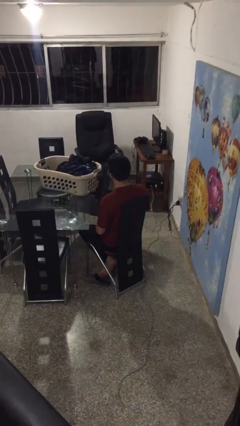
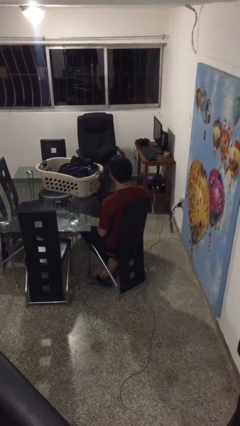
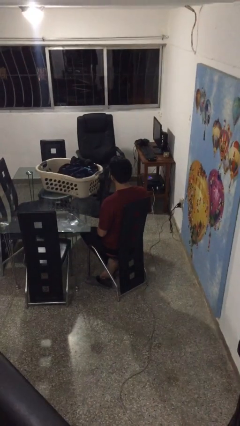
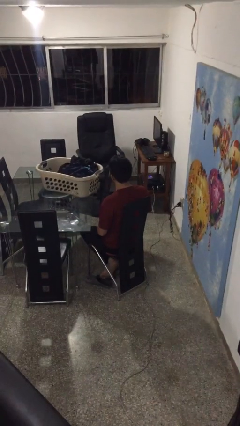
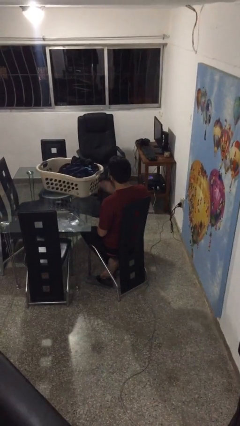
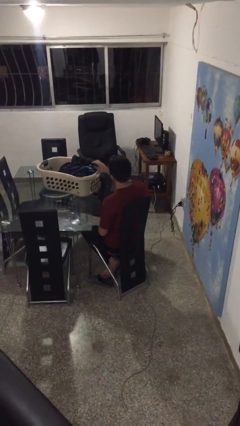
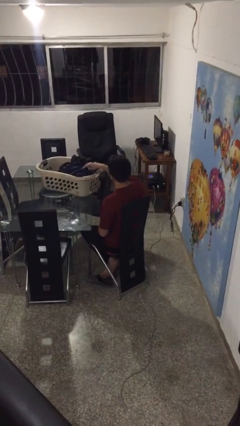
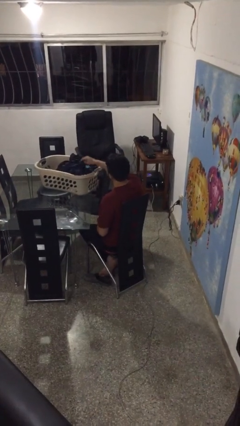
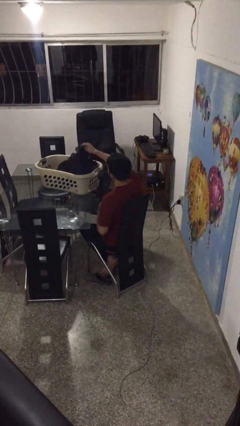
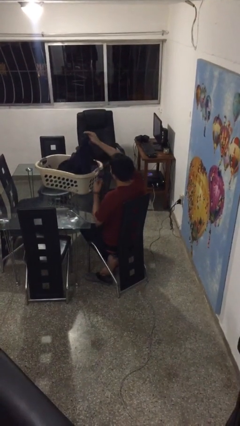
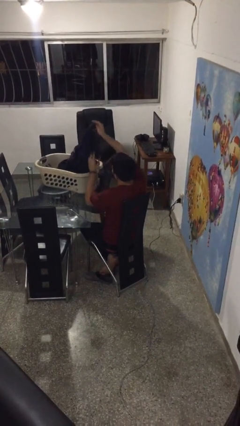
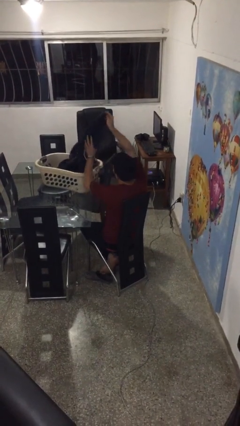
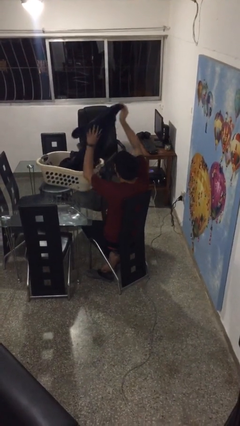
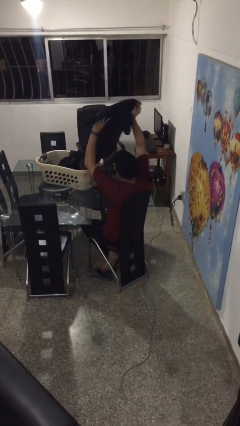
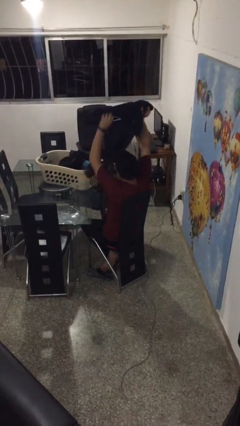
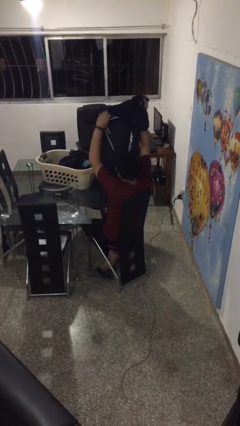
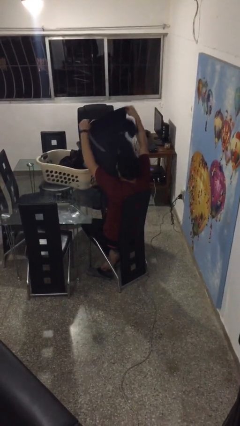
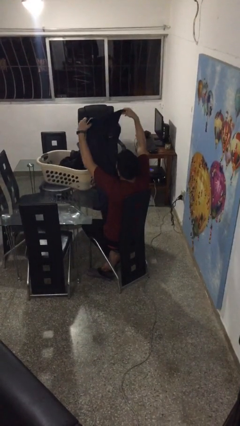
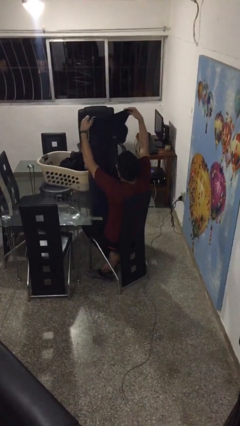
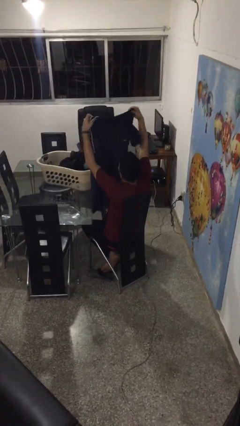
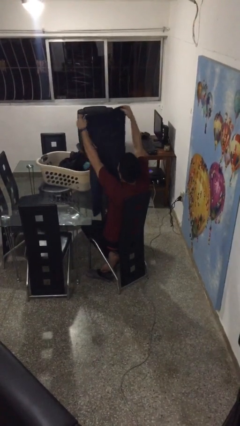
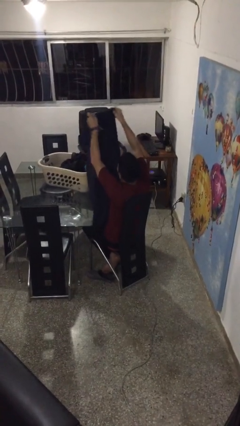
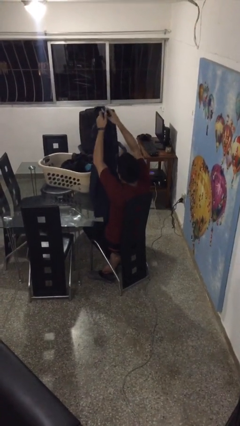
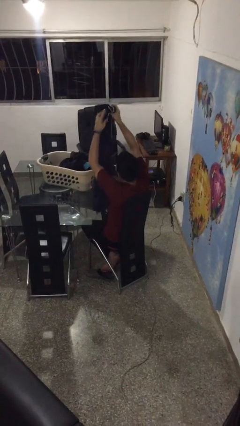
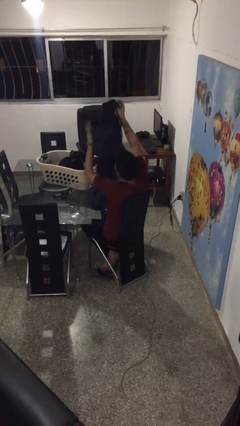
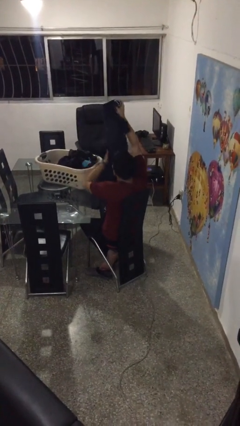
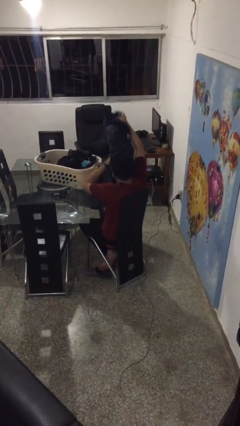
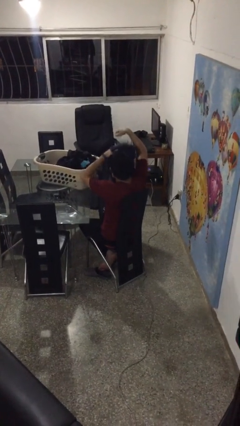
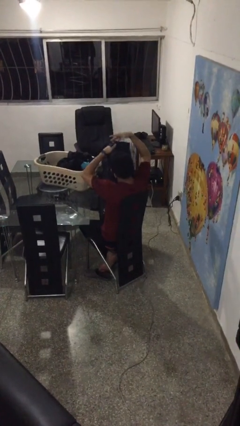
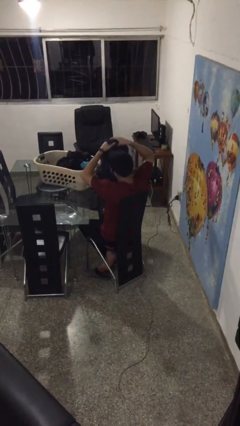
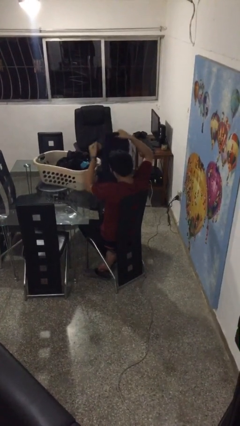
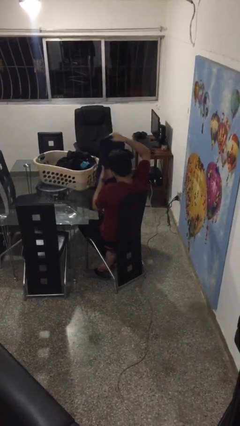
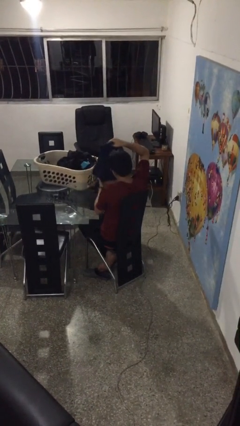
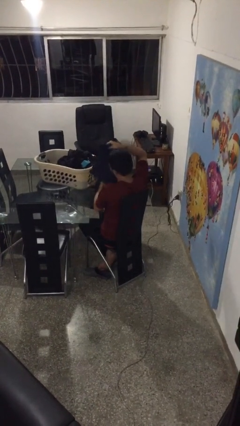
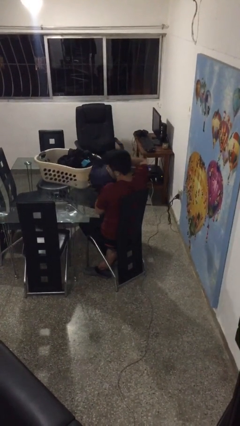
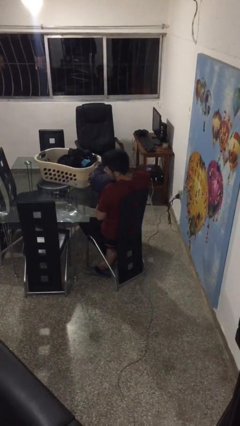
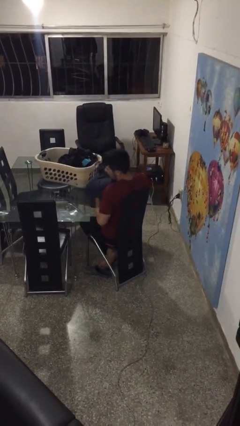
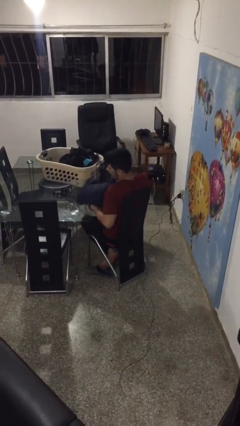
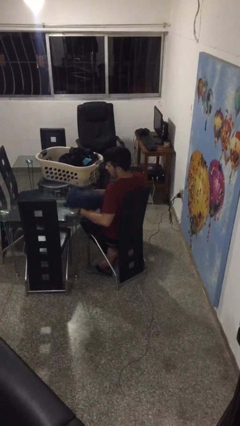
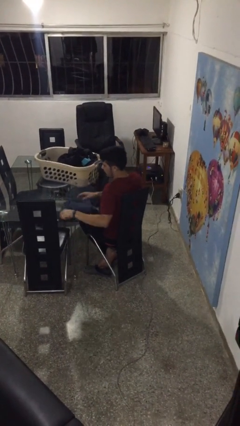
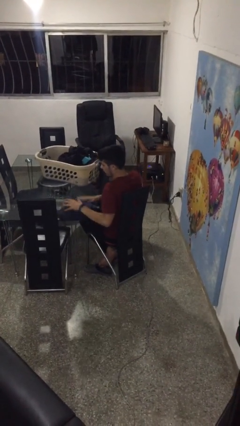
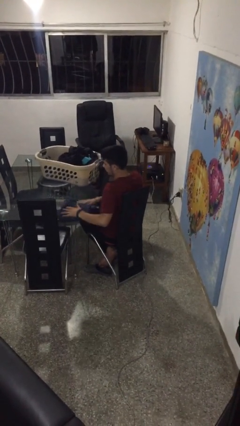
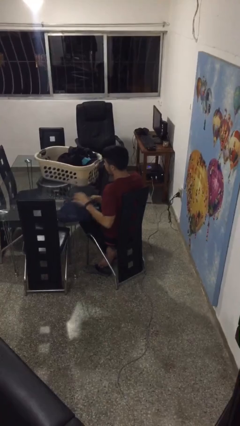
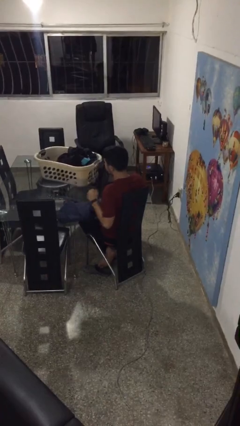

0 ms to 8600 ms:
person folds pants

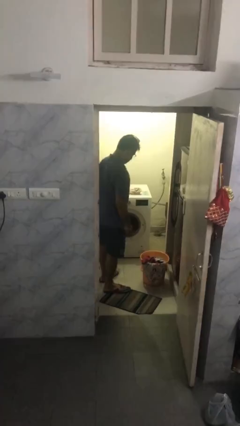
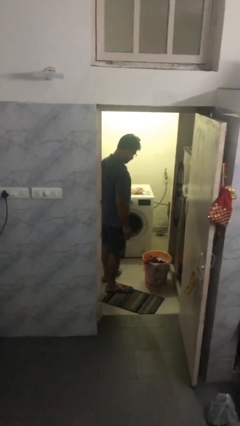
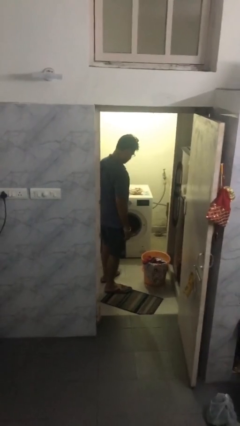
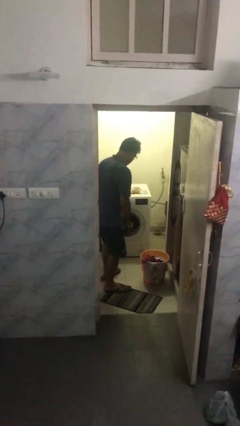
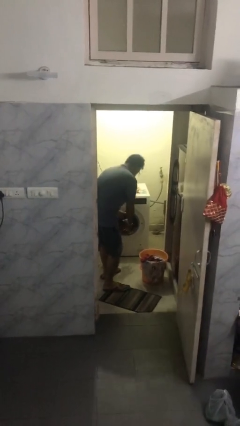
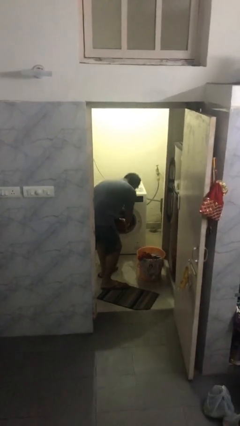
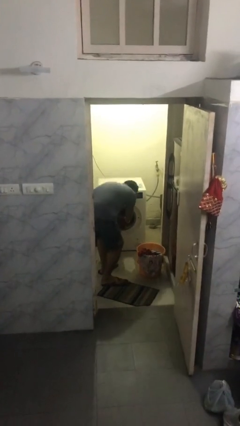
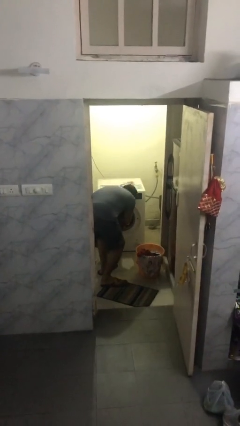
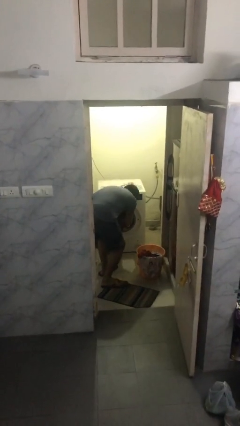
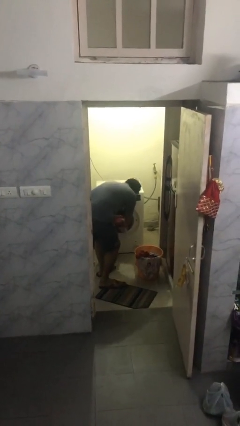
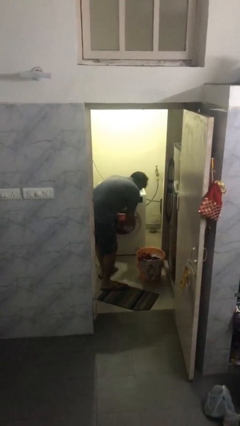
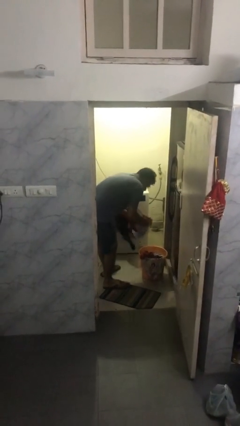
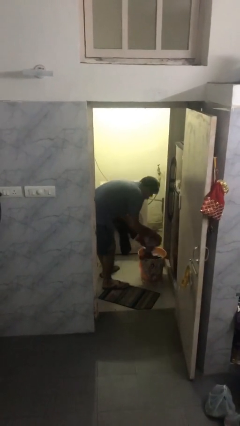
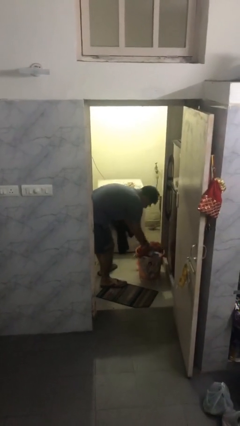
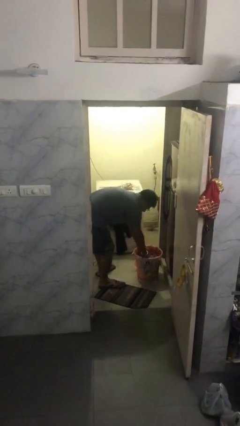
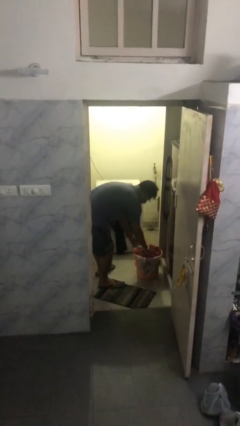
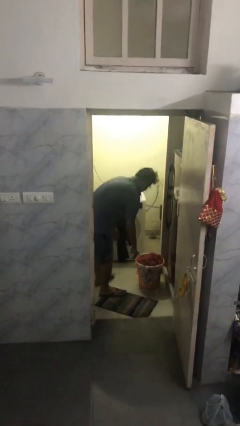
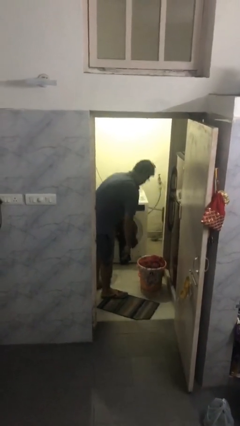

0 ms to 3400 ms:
person unloads dryer

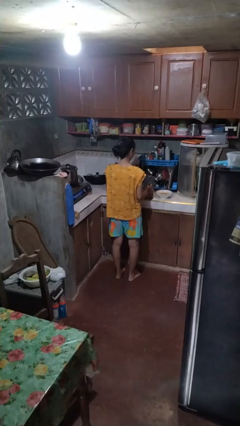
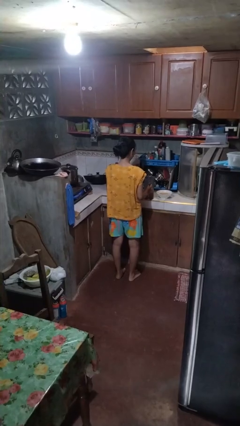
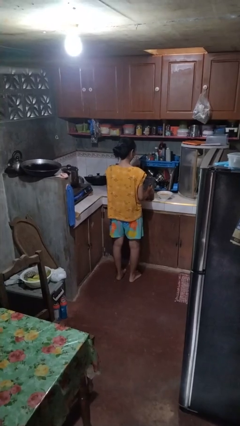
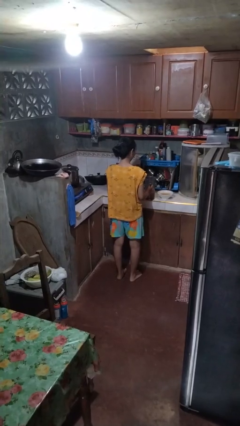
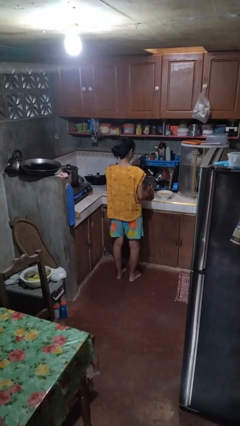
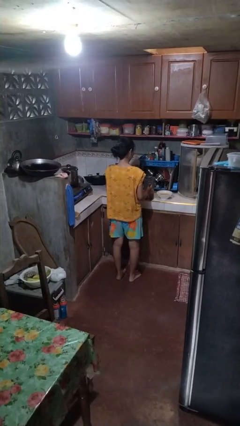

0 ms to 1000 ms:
person pours into bowl

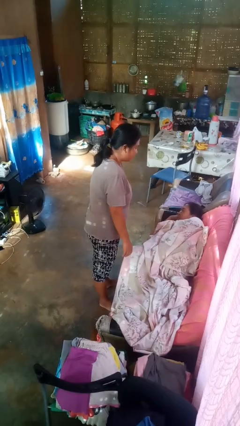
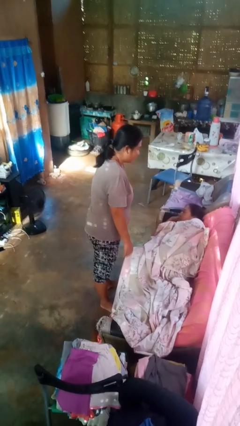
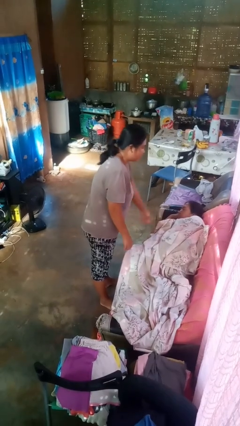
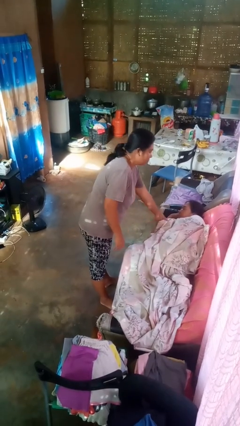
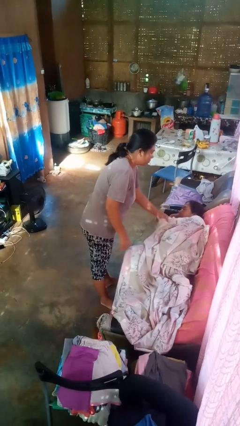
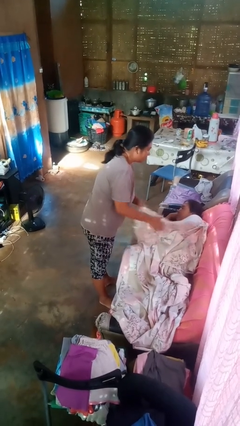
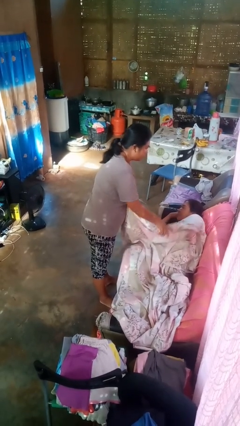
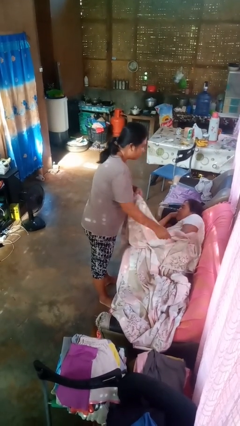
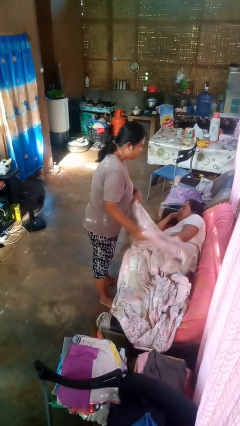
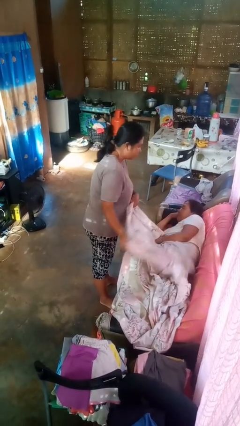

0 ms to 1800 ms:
person uncovers friend with blanket

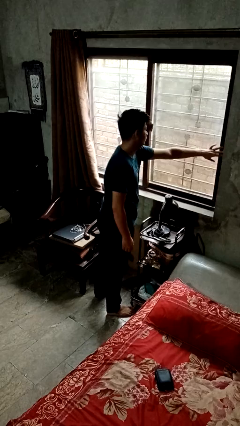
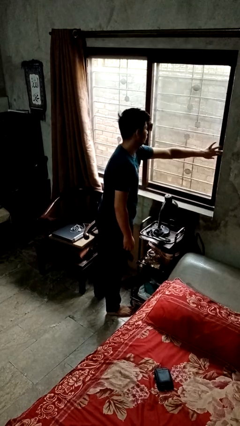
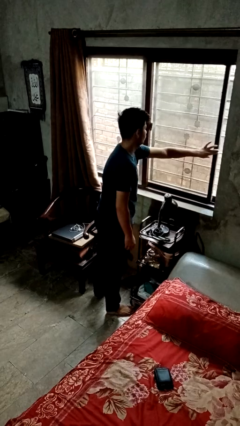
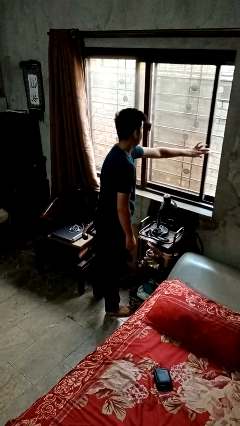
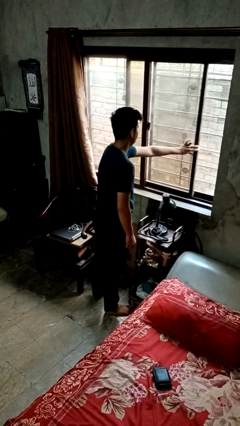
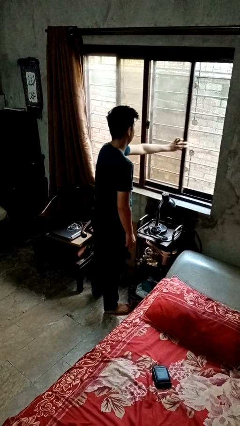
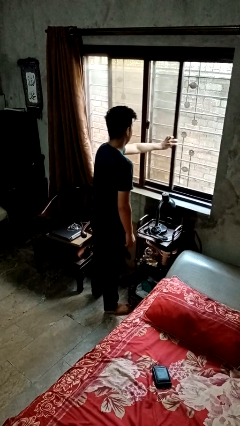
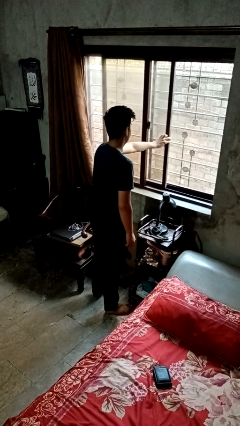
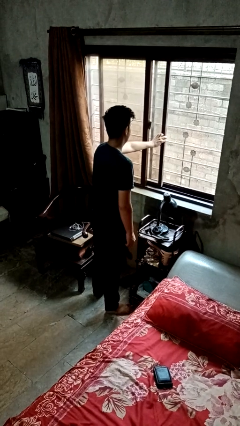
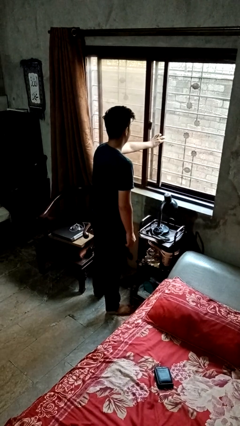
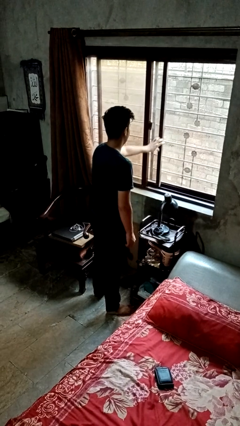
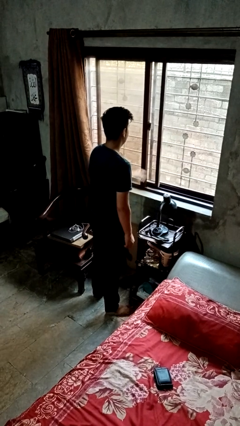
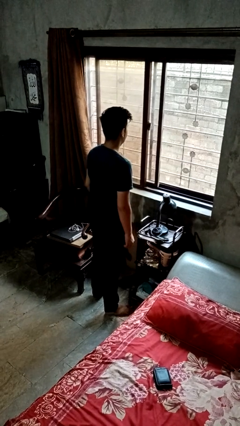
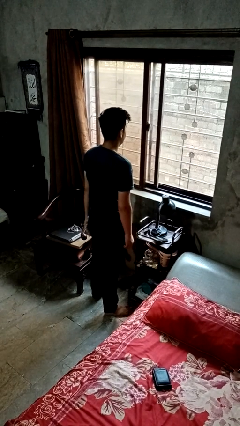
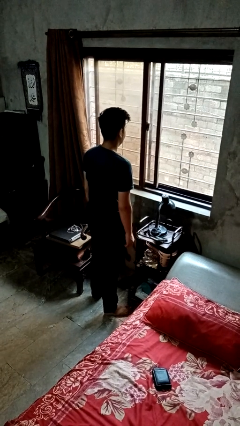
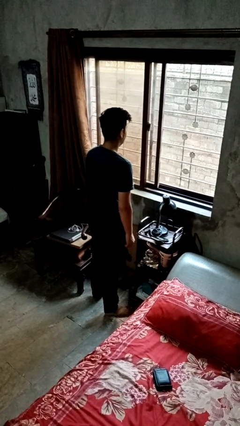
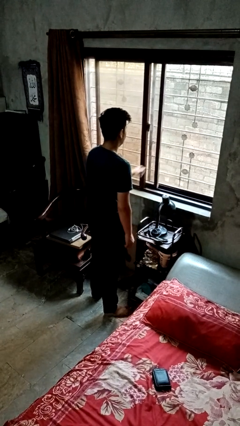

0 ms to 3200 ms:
person opens home window
